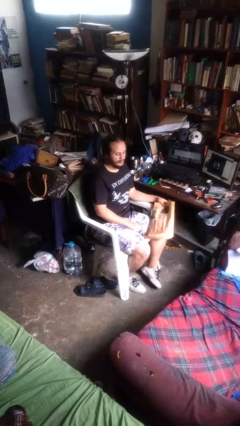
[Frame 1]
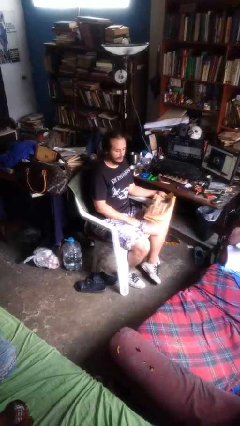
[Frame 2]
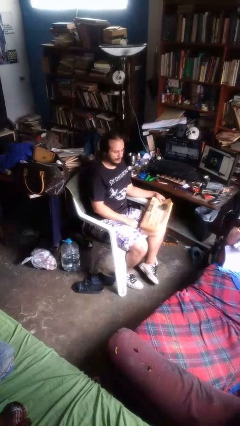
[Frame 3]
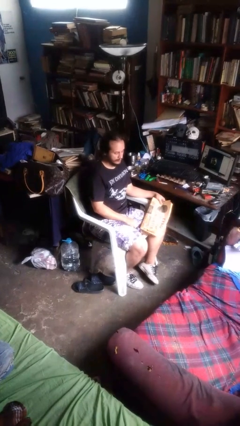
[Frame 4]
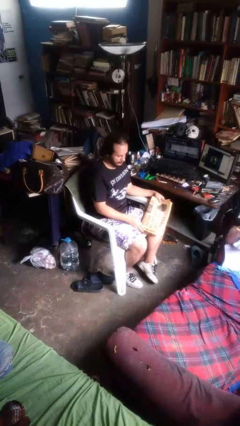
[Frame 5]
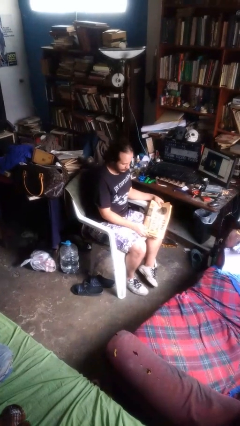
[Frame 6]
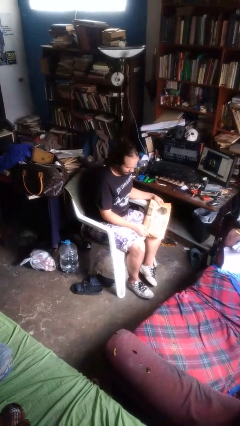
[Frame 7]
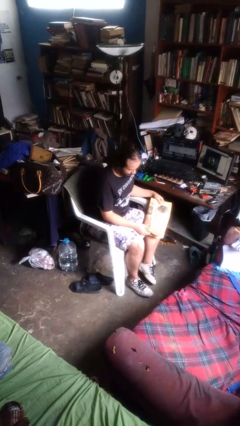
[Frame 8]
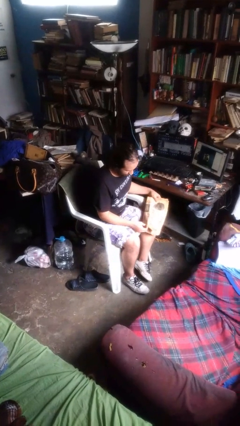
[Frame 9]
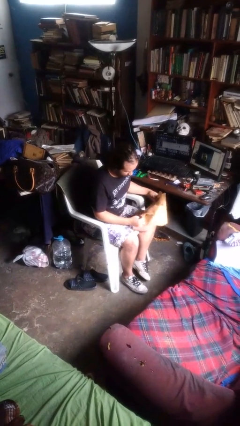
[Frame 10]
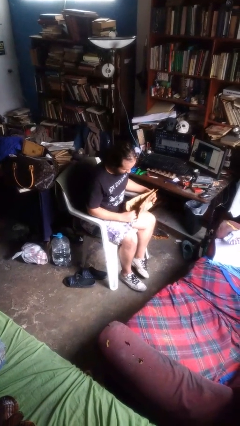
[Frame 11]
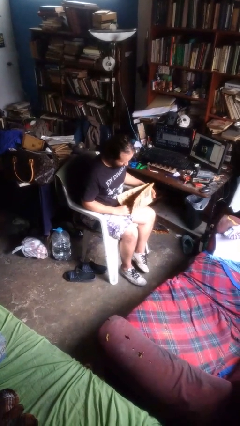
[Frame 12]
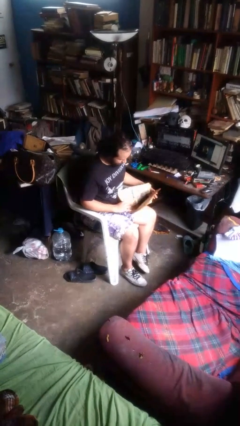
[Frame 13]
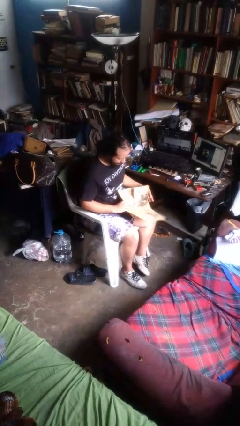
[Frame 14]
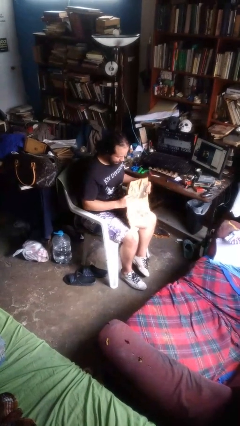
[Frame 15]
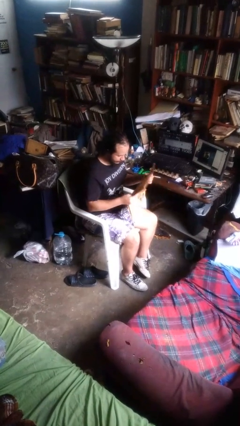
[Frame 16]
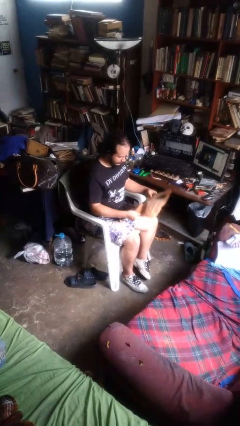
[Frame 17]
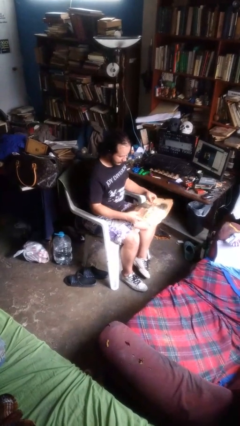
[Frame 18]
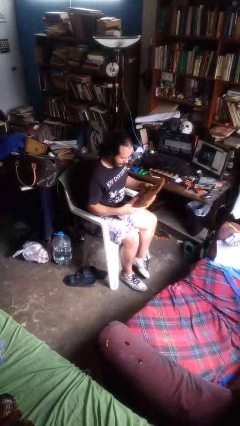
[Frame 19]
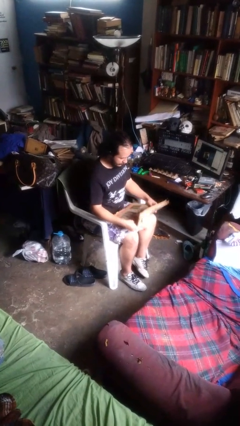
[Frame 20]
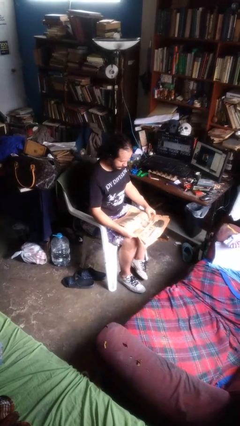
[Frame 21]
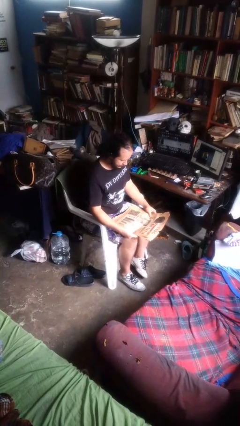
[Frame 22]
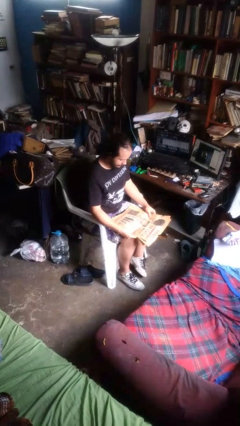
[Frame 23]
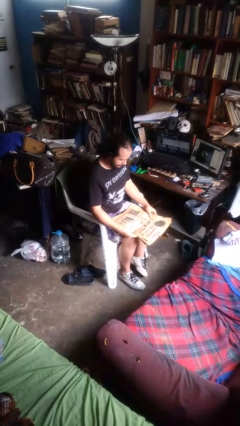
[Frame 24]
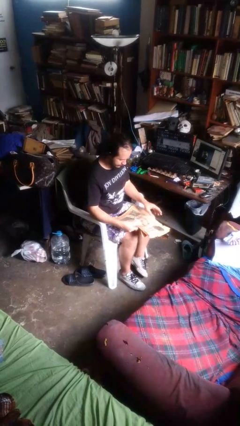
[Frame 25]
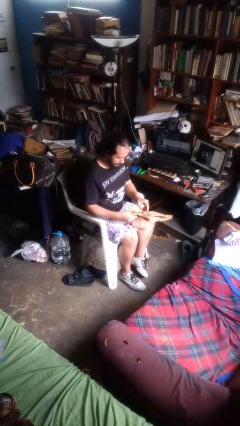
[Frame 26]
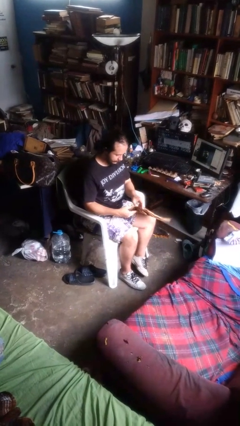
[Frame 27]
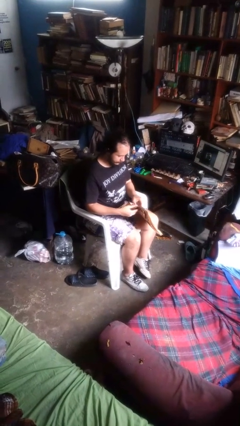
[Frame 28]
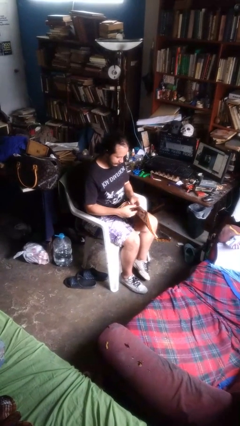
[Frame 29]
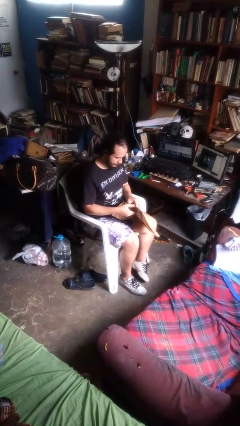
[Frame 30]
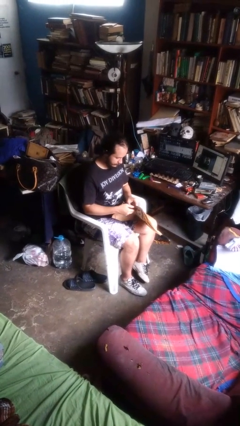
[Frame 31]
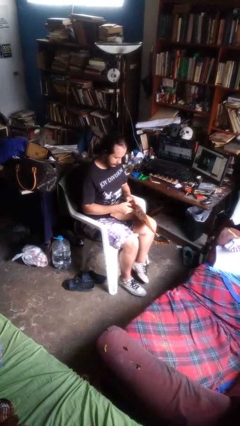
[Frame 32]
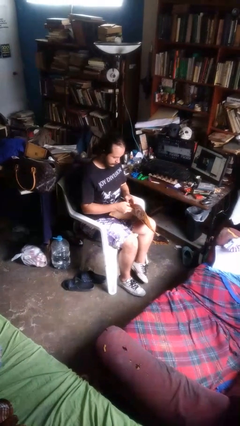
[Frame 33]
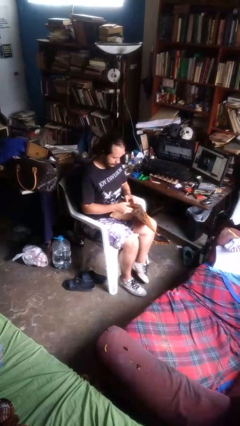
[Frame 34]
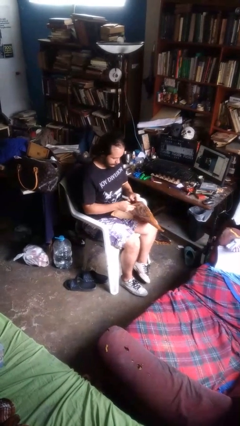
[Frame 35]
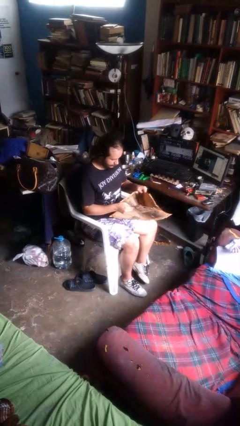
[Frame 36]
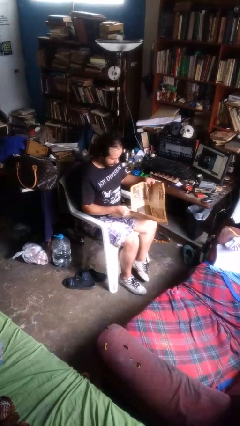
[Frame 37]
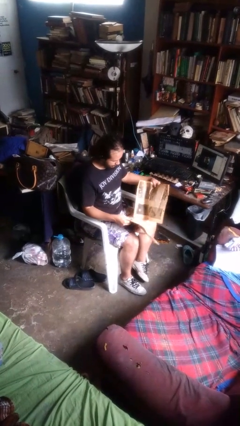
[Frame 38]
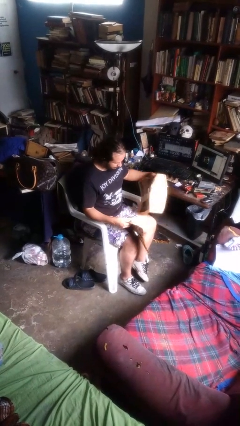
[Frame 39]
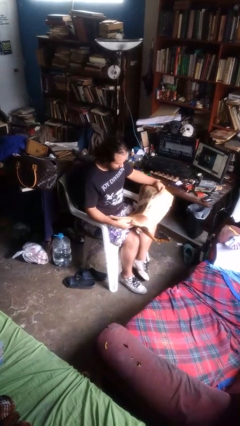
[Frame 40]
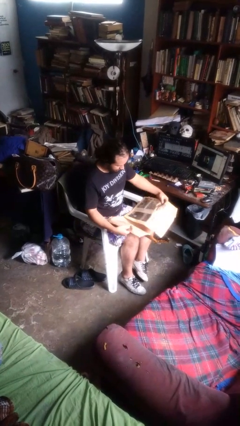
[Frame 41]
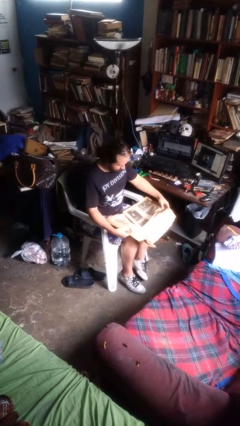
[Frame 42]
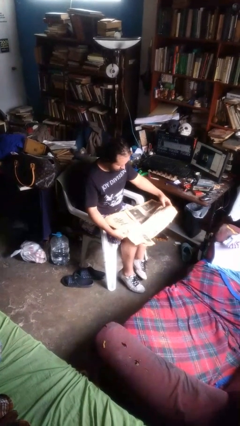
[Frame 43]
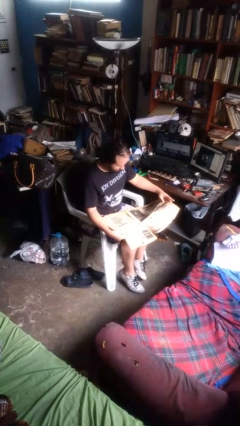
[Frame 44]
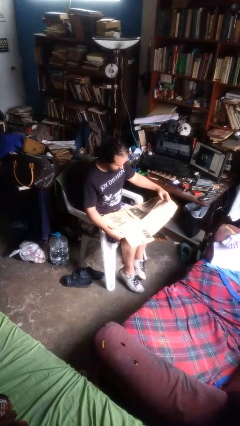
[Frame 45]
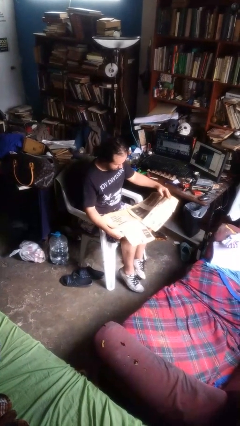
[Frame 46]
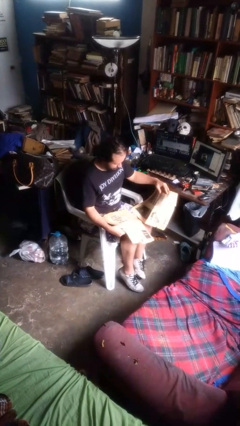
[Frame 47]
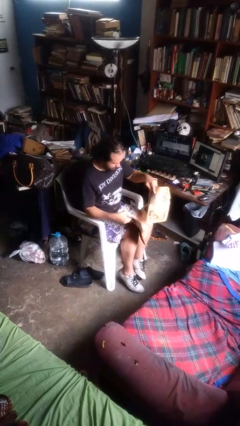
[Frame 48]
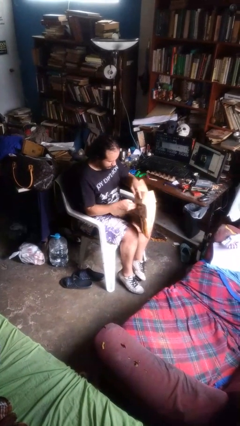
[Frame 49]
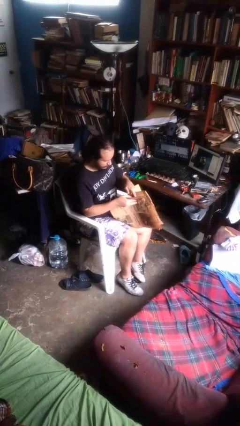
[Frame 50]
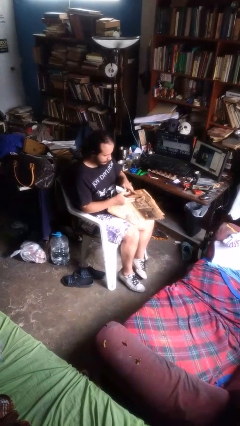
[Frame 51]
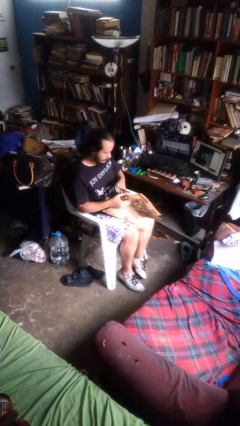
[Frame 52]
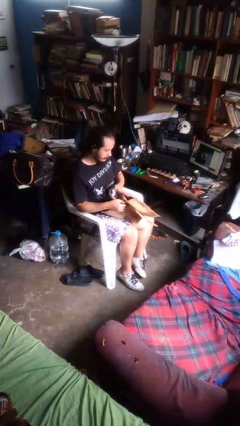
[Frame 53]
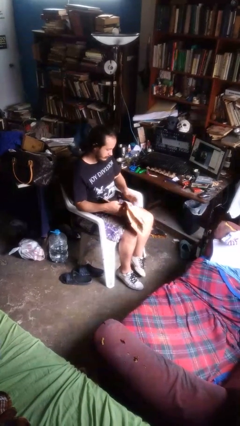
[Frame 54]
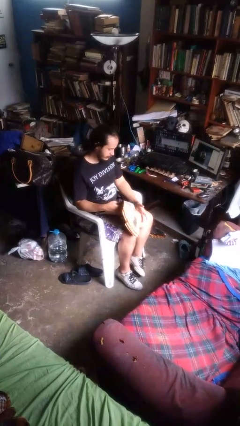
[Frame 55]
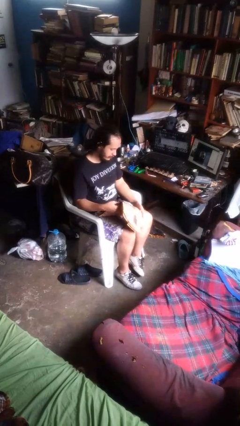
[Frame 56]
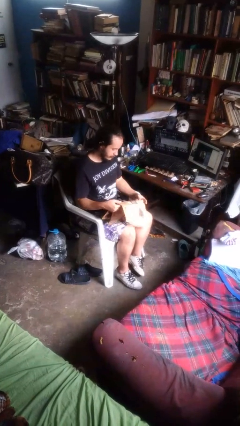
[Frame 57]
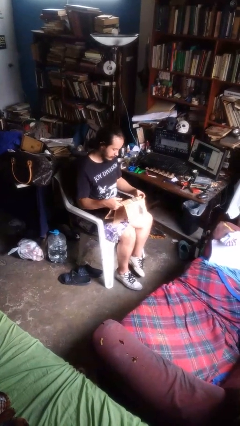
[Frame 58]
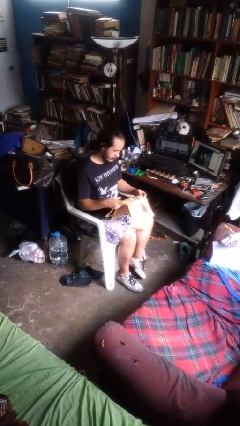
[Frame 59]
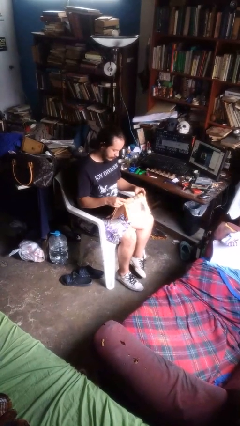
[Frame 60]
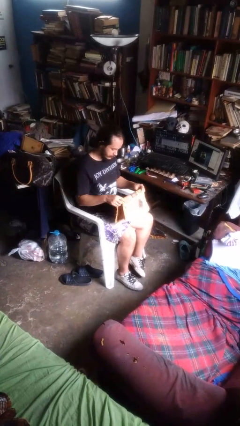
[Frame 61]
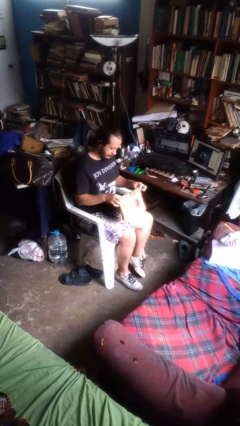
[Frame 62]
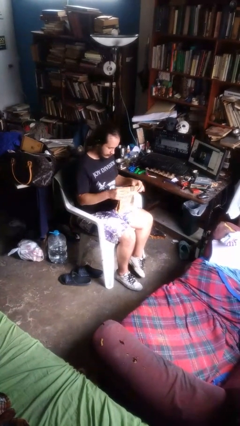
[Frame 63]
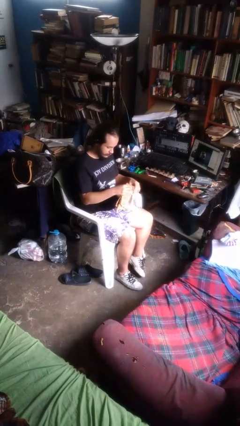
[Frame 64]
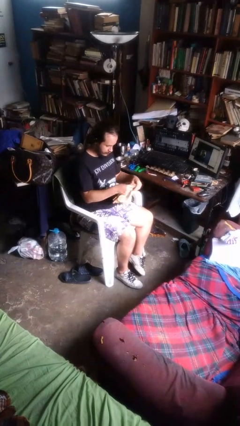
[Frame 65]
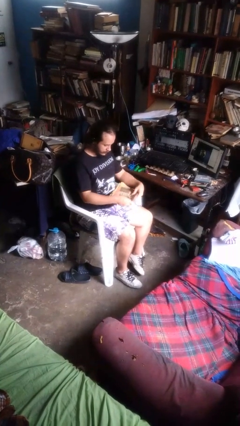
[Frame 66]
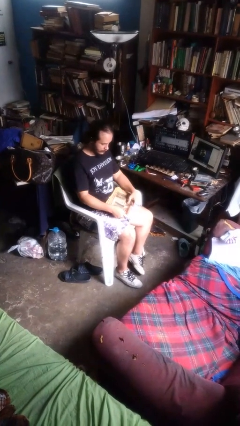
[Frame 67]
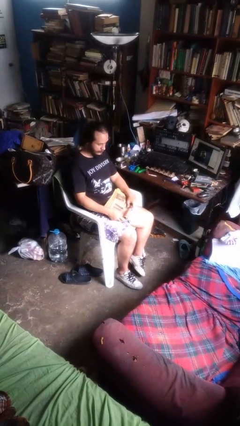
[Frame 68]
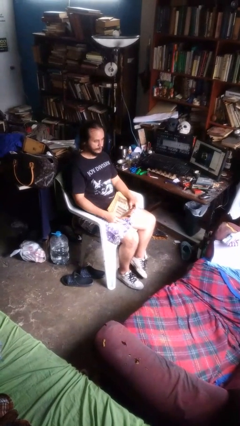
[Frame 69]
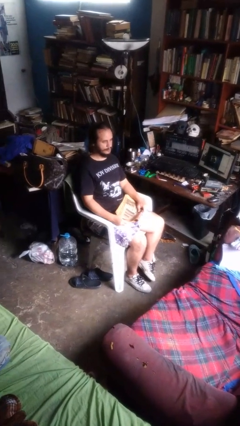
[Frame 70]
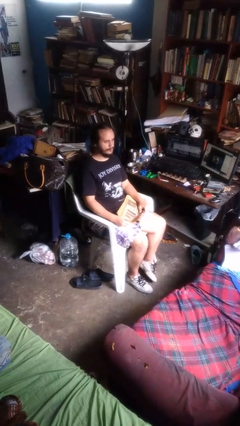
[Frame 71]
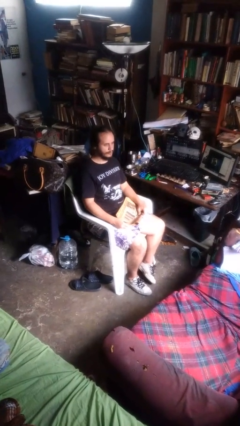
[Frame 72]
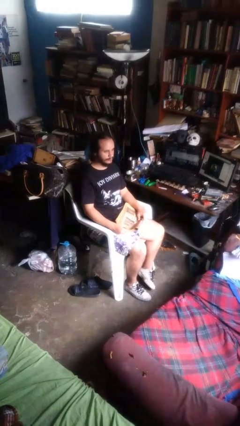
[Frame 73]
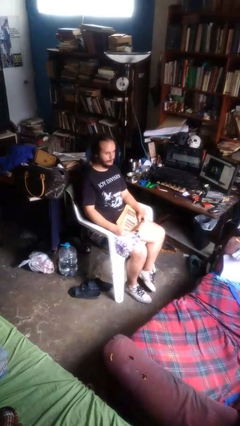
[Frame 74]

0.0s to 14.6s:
person reads newspaper

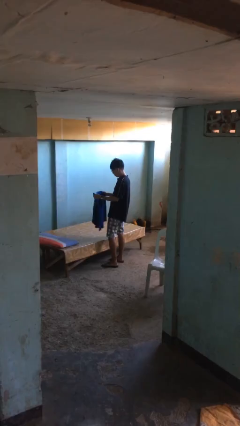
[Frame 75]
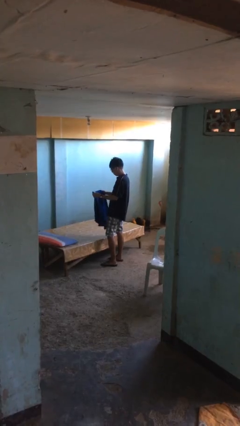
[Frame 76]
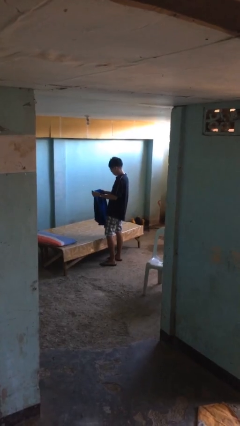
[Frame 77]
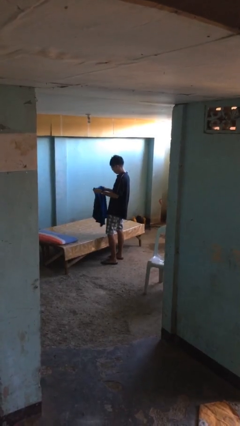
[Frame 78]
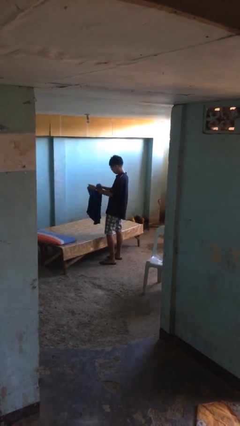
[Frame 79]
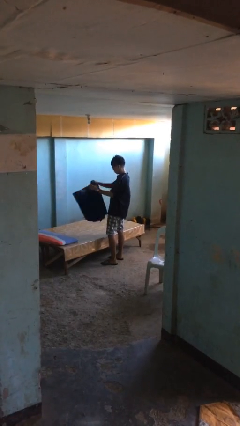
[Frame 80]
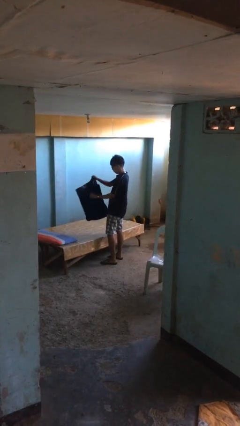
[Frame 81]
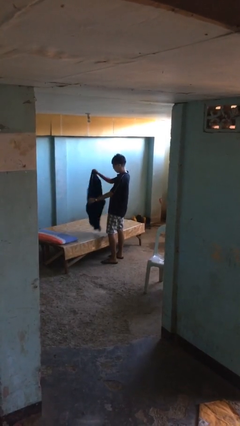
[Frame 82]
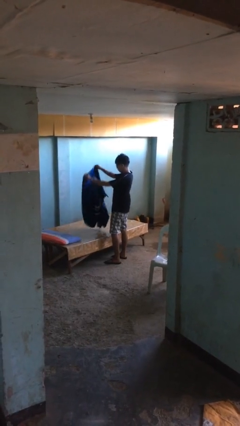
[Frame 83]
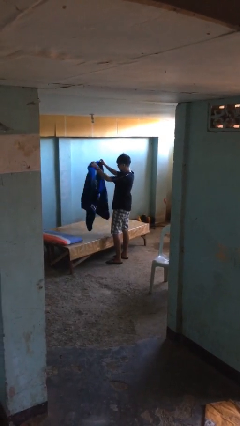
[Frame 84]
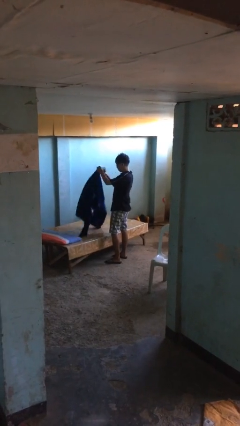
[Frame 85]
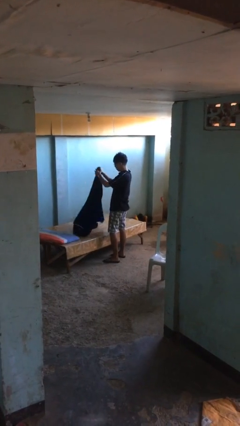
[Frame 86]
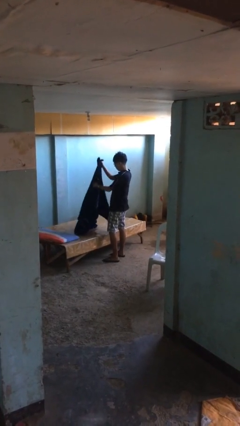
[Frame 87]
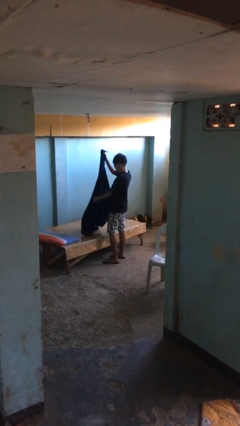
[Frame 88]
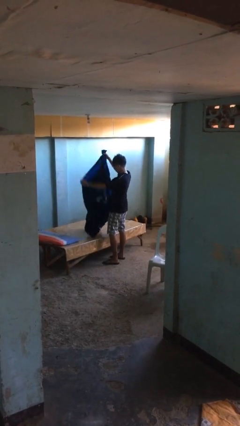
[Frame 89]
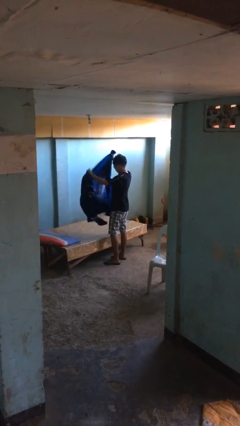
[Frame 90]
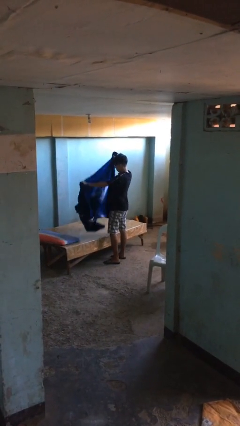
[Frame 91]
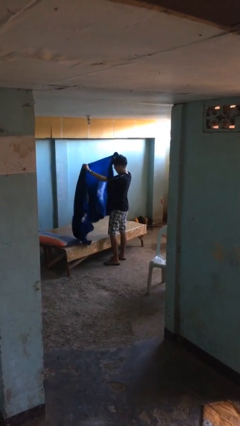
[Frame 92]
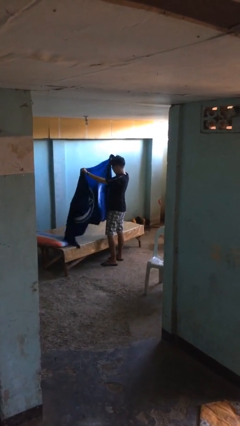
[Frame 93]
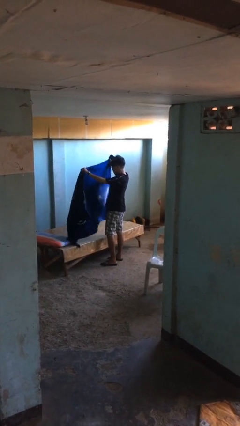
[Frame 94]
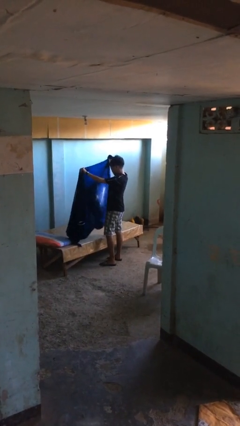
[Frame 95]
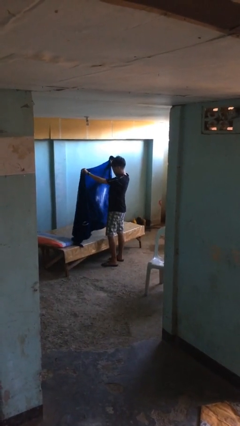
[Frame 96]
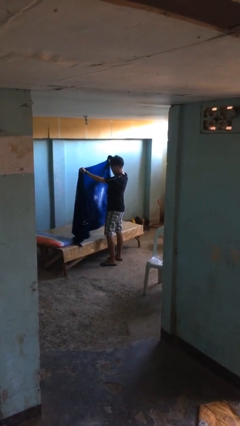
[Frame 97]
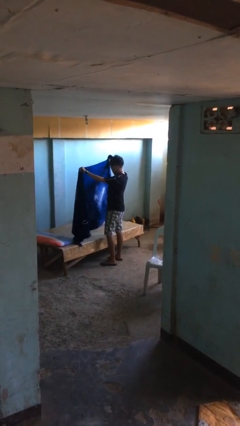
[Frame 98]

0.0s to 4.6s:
person unfolds blanket
